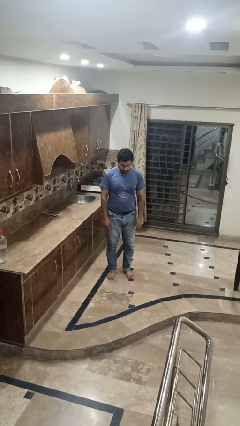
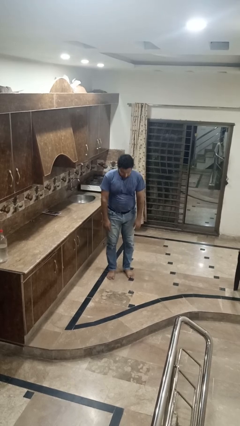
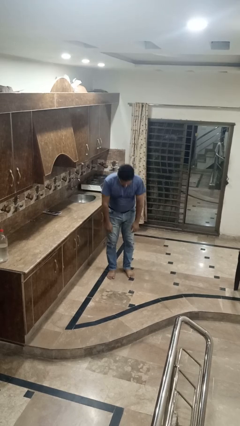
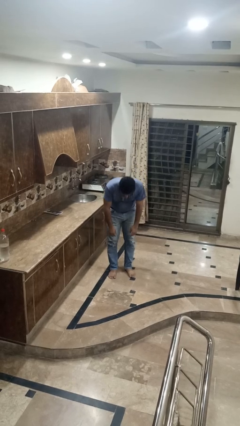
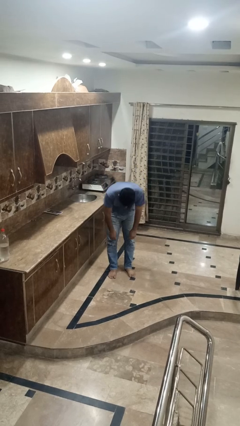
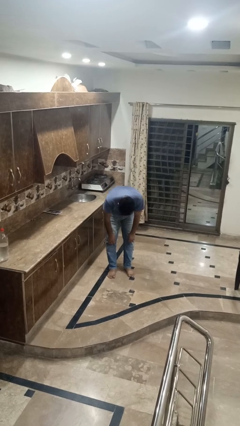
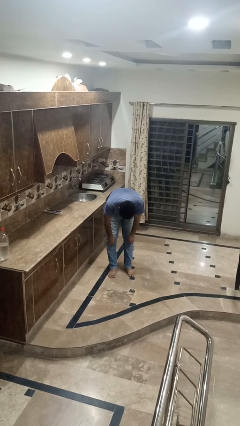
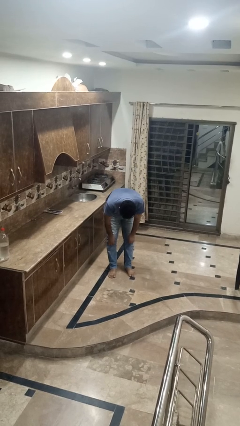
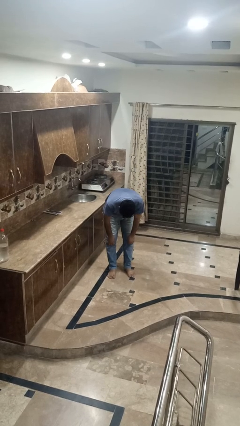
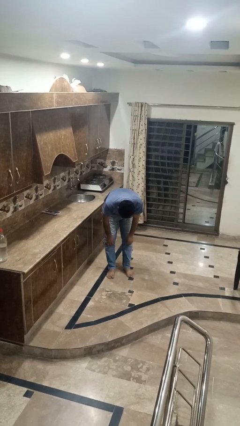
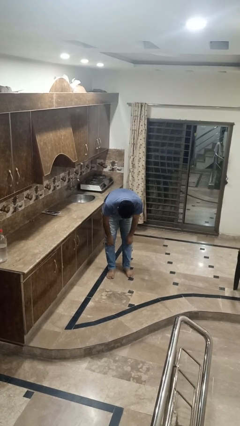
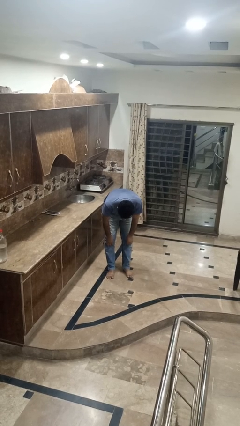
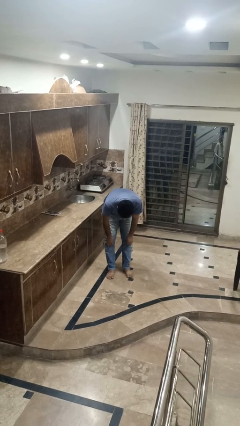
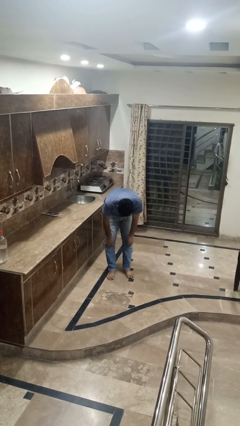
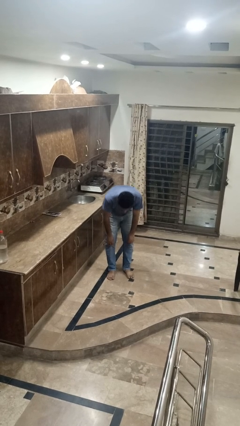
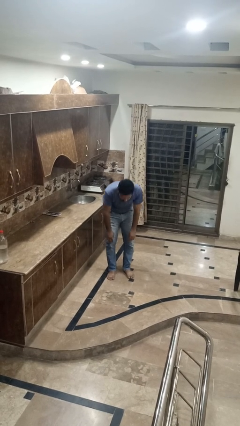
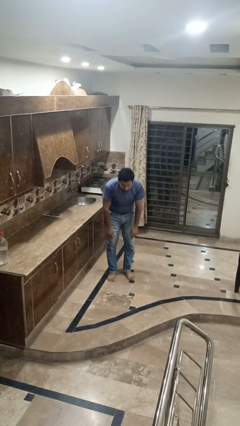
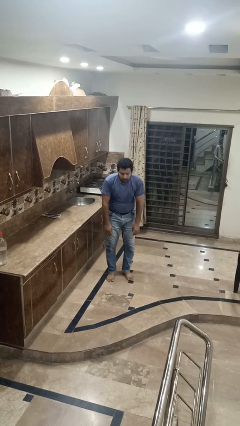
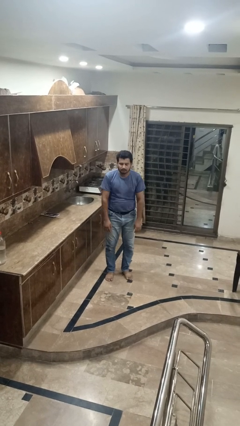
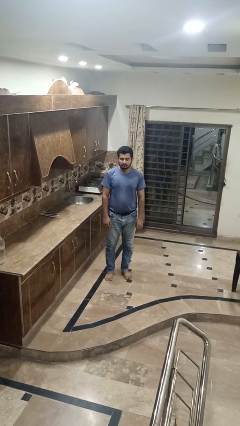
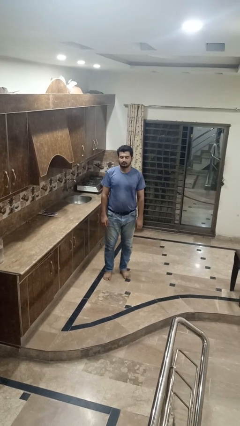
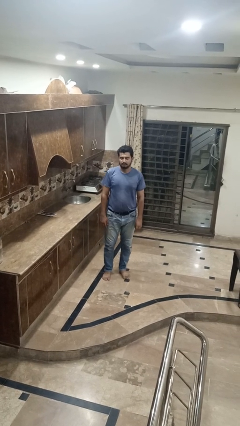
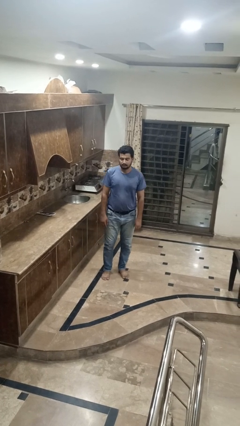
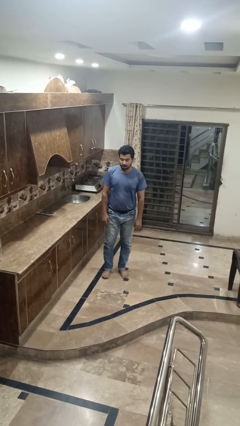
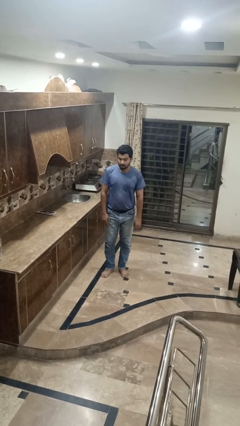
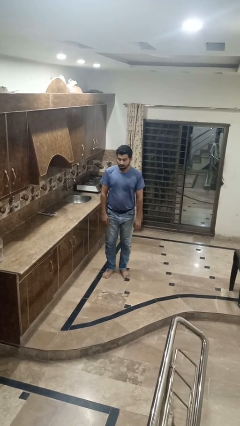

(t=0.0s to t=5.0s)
person bows

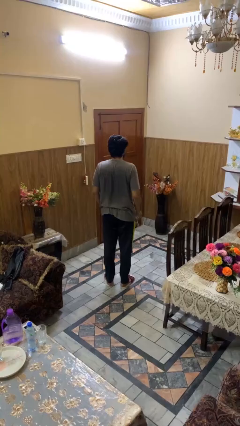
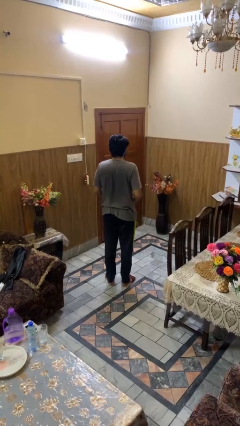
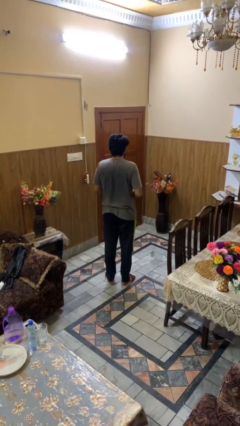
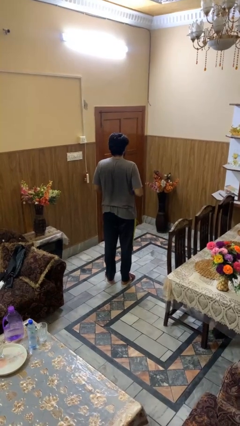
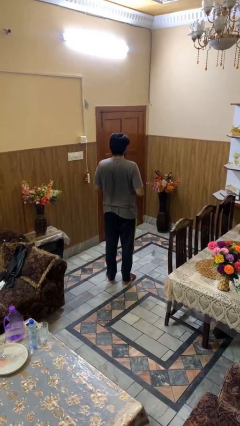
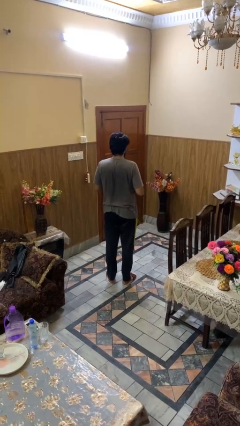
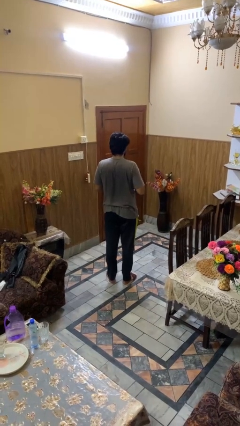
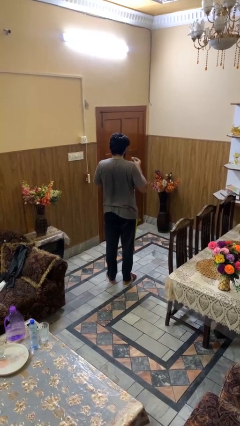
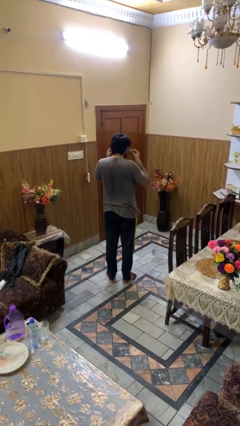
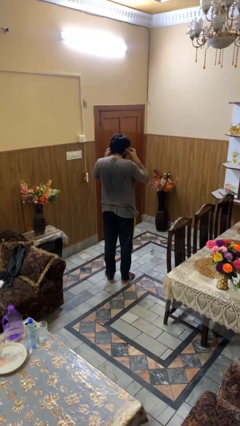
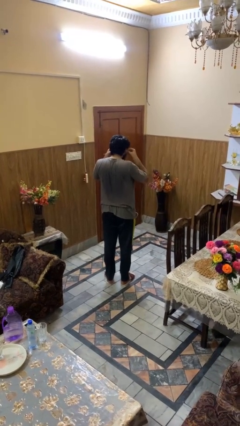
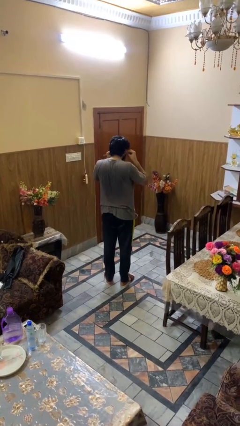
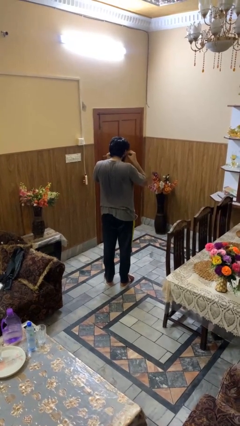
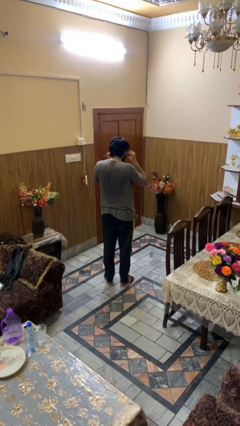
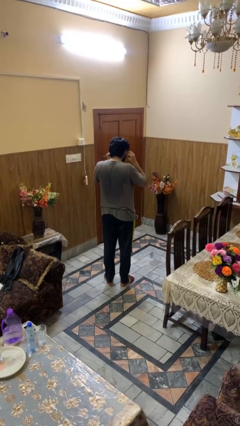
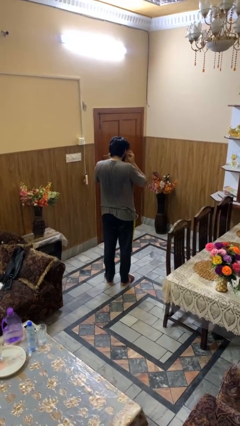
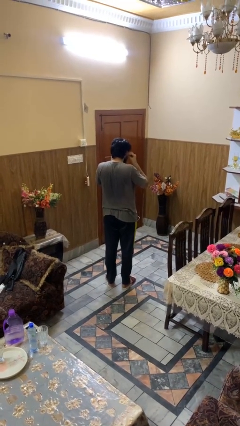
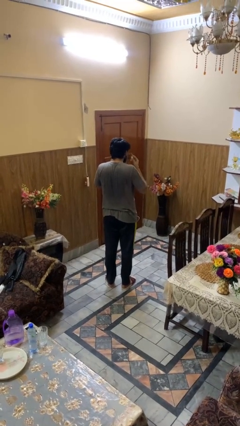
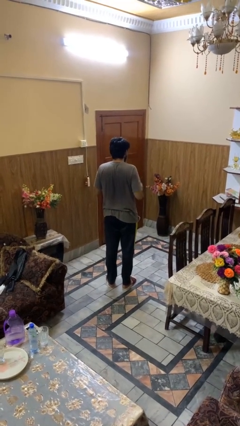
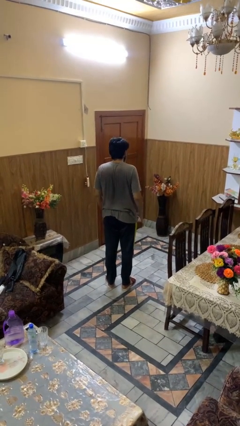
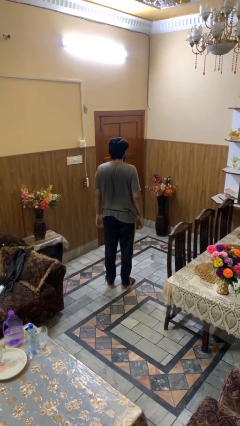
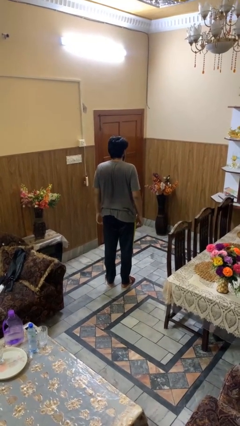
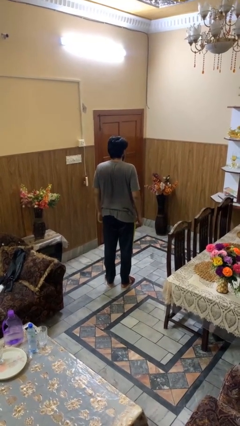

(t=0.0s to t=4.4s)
person puts on headphones

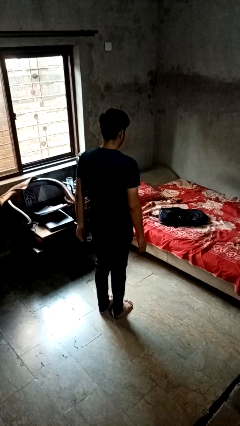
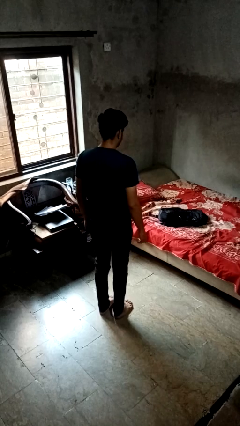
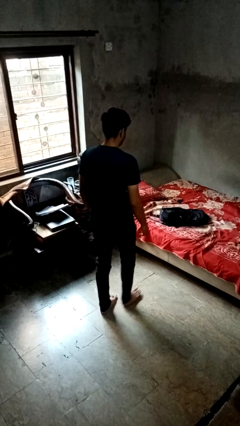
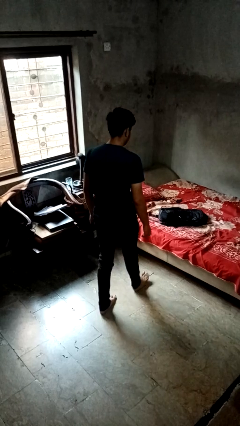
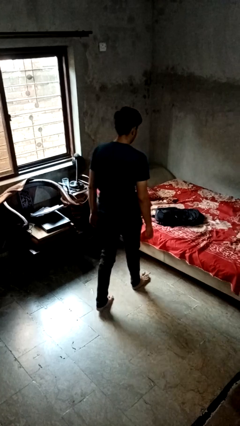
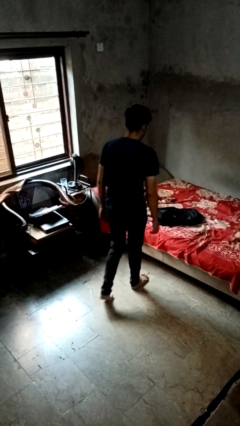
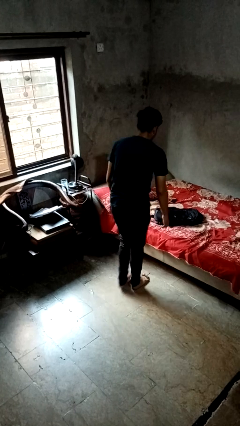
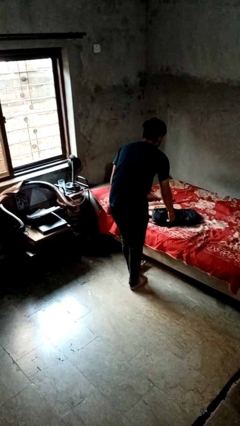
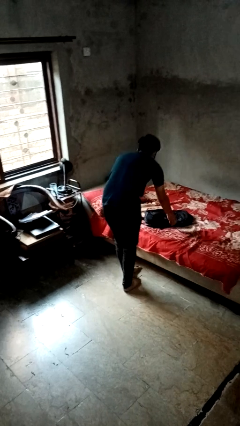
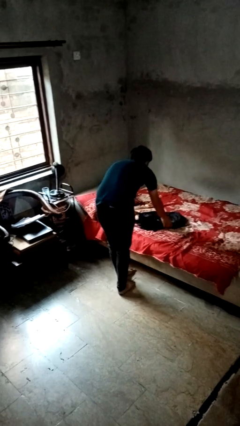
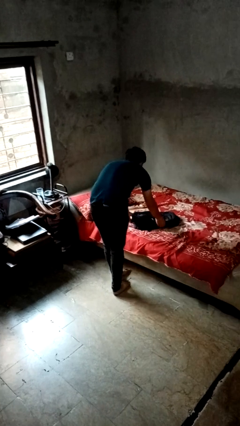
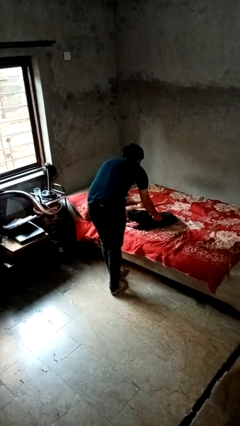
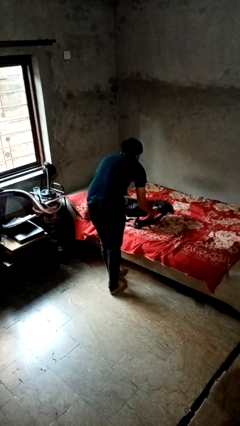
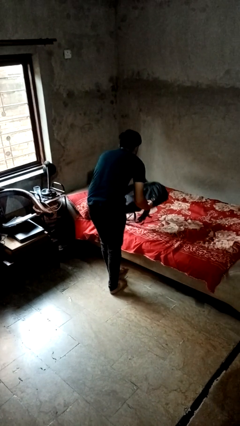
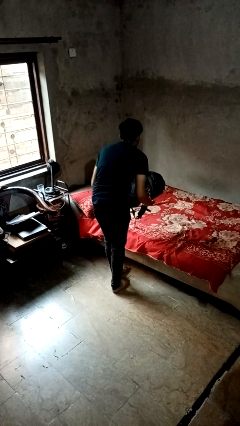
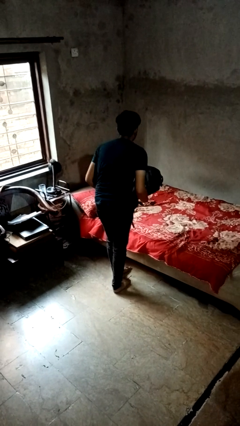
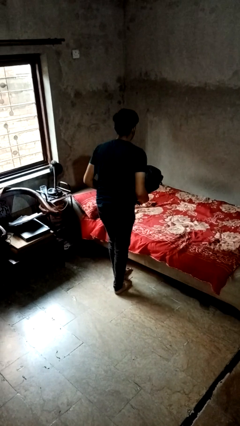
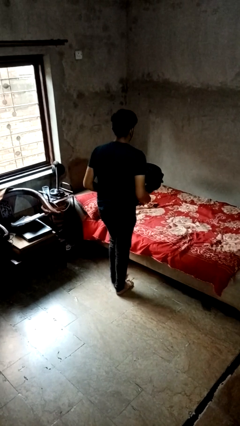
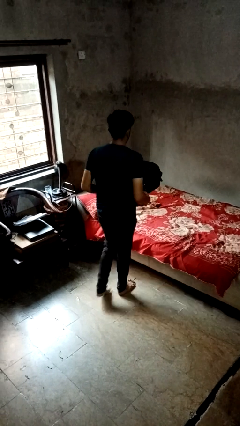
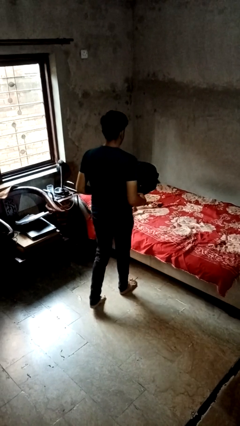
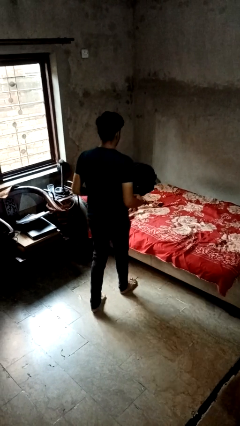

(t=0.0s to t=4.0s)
person picks up object from bed

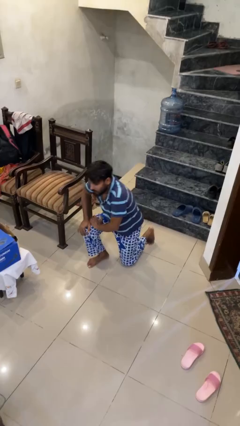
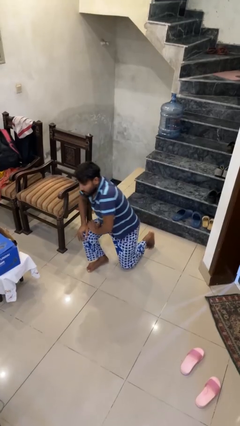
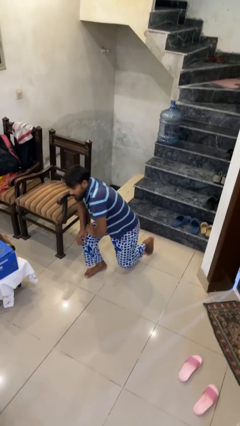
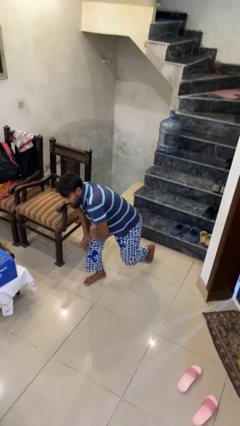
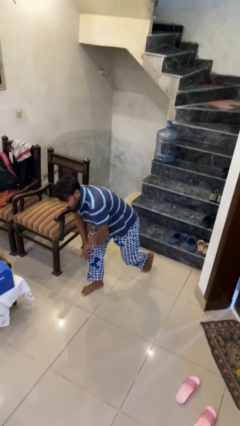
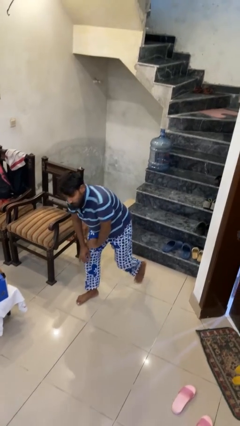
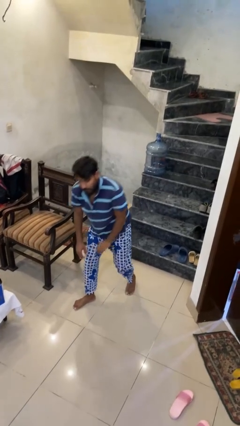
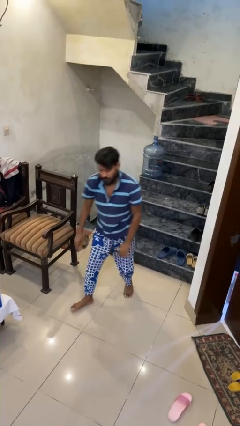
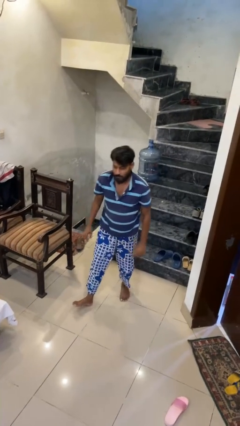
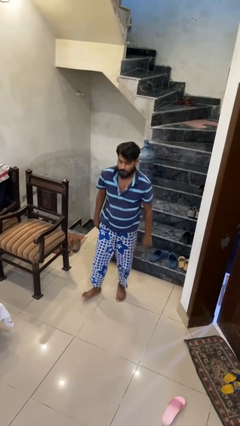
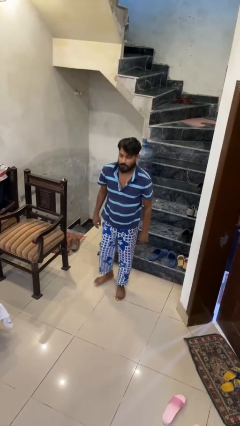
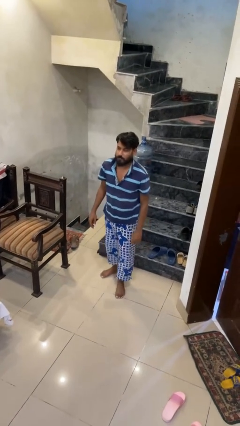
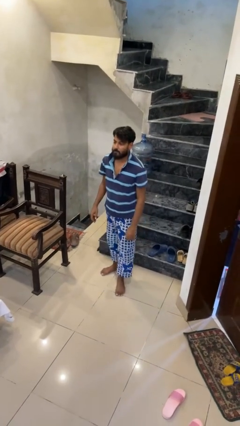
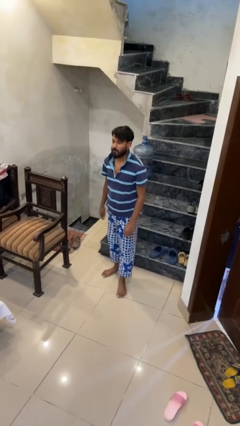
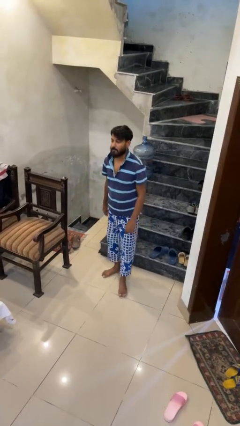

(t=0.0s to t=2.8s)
person stands up from floor

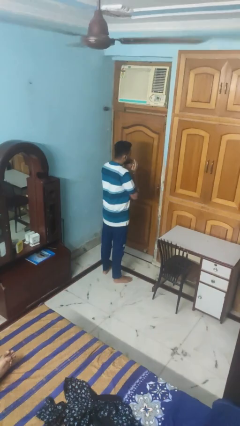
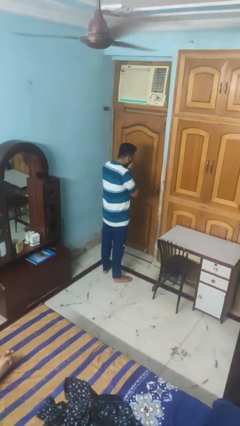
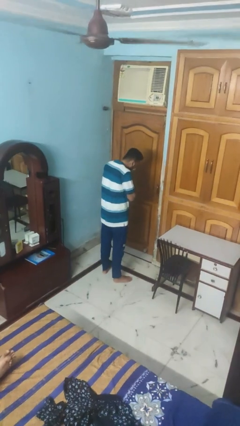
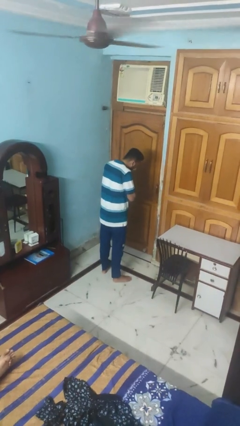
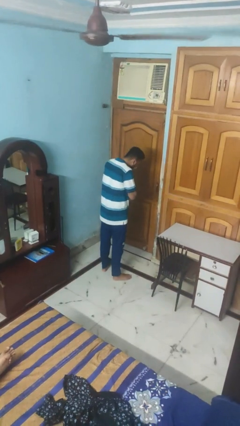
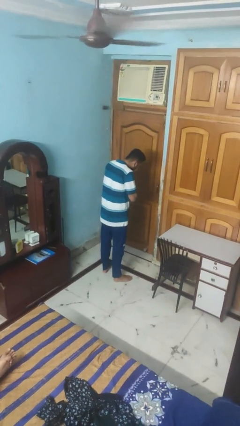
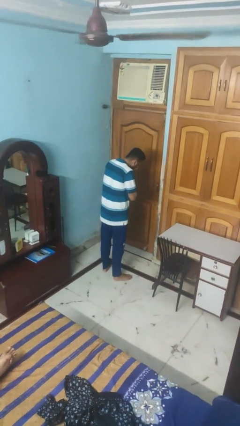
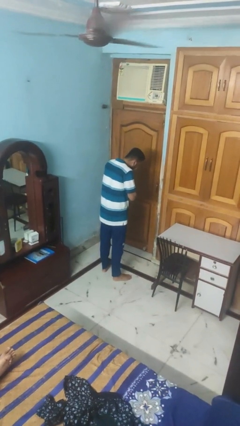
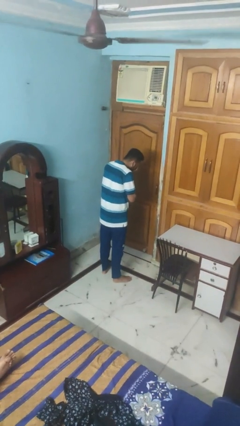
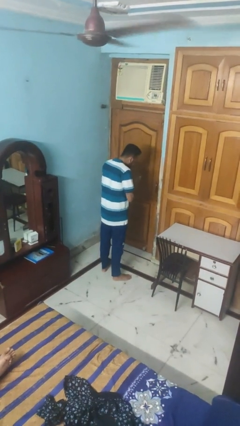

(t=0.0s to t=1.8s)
person sneezes into hand
